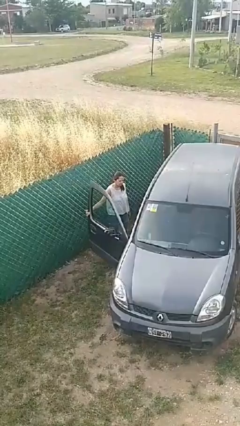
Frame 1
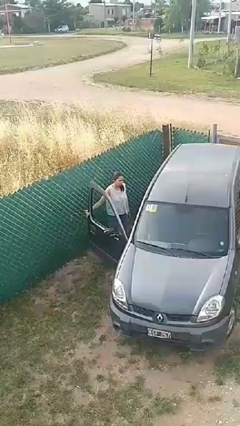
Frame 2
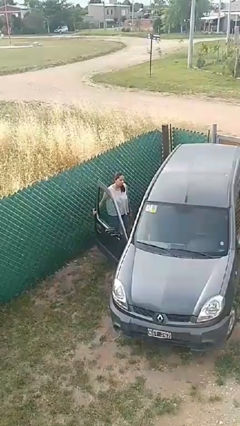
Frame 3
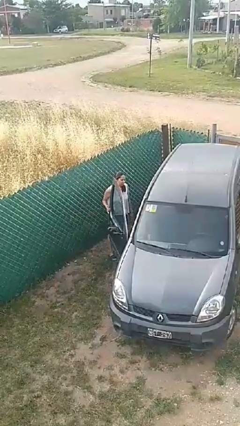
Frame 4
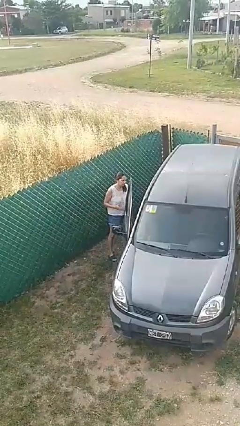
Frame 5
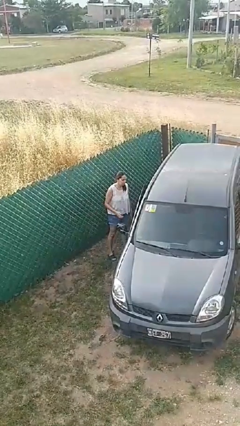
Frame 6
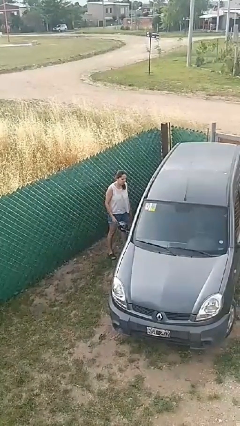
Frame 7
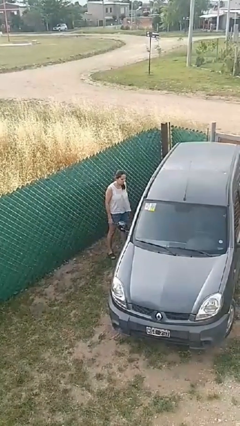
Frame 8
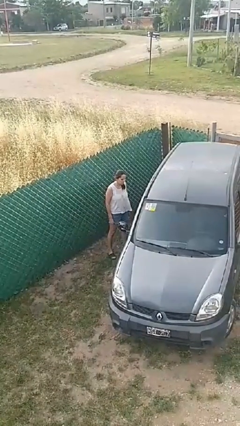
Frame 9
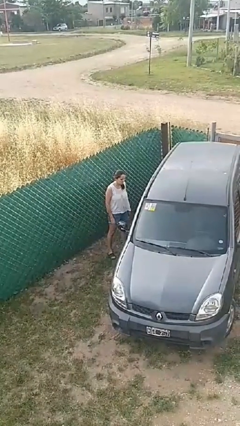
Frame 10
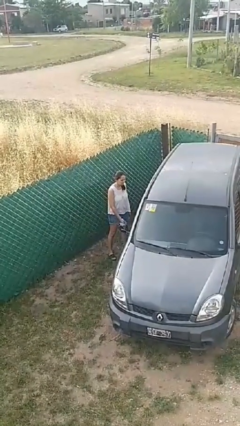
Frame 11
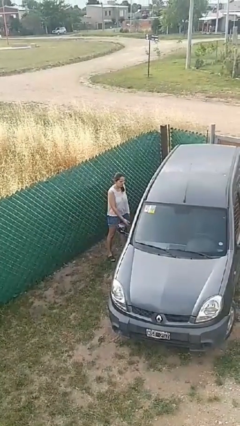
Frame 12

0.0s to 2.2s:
person closes car door

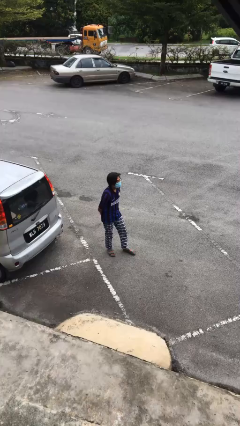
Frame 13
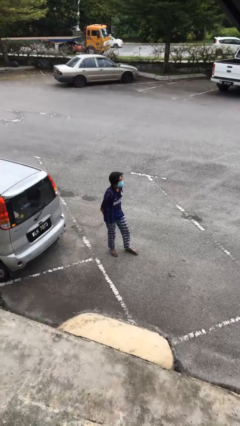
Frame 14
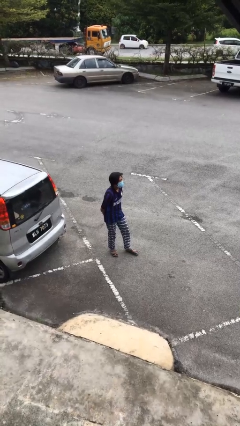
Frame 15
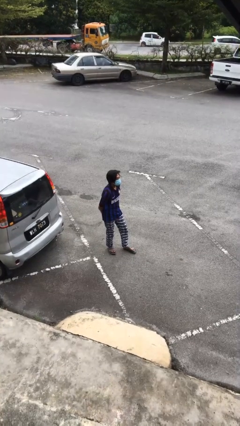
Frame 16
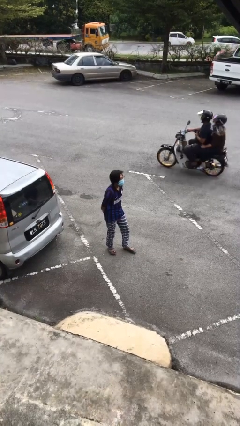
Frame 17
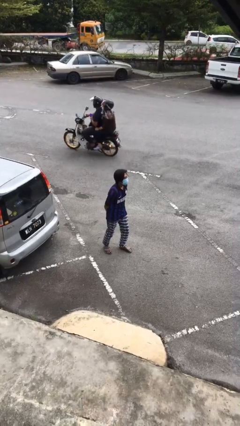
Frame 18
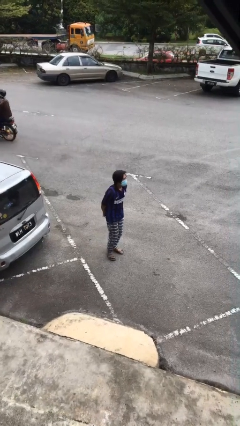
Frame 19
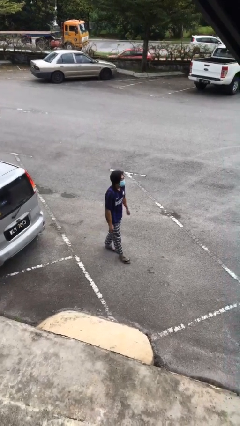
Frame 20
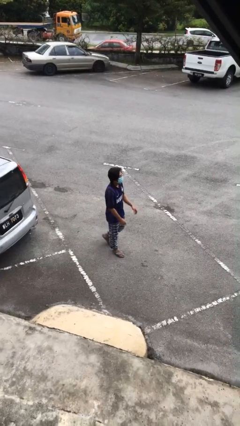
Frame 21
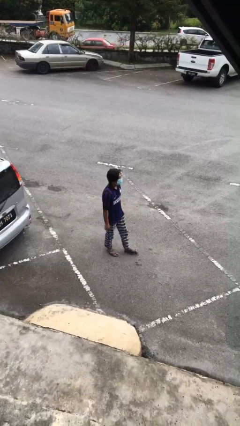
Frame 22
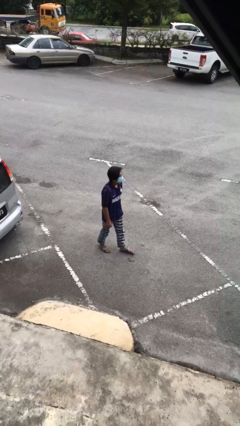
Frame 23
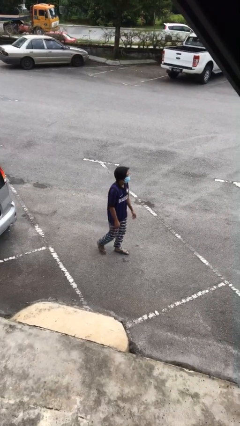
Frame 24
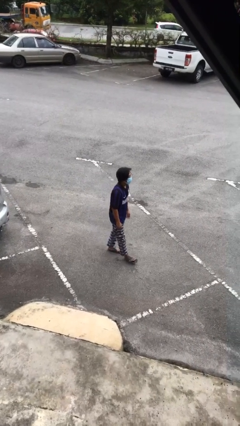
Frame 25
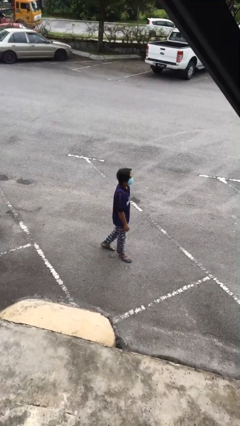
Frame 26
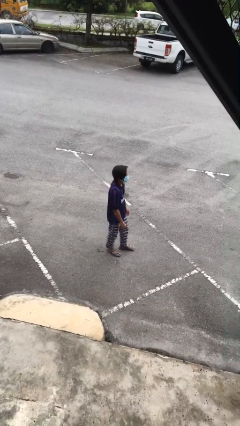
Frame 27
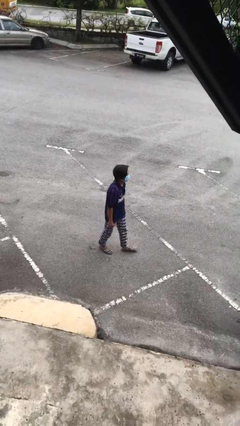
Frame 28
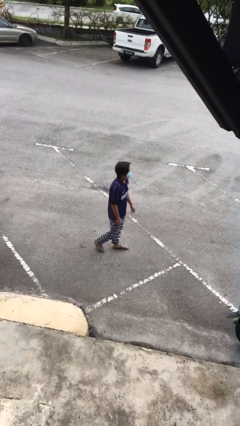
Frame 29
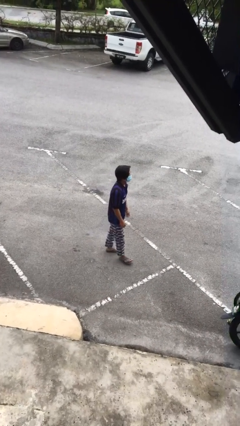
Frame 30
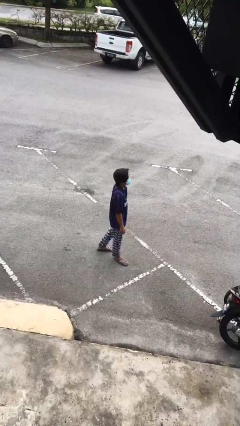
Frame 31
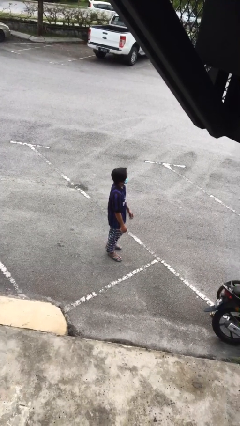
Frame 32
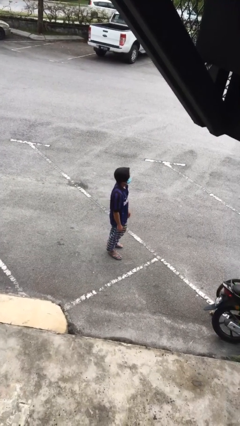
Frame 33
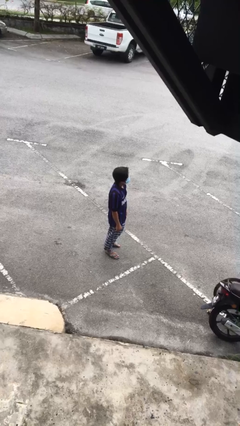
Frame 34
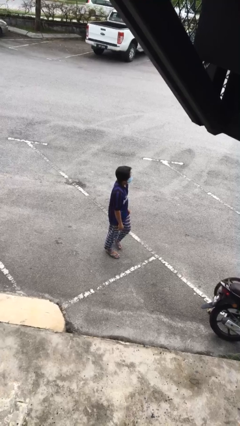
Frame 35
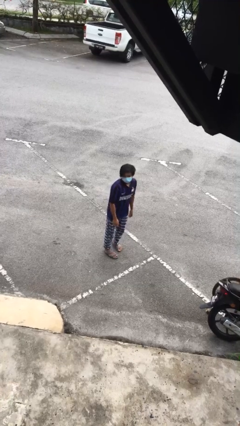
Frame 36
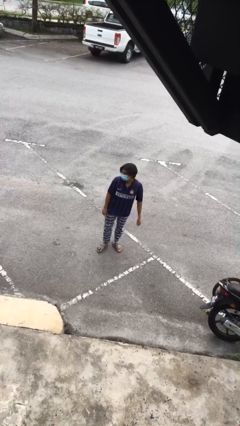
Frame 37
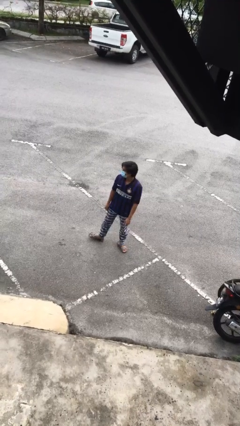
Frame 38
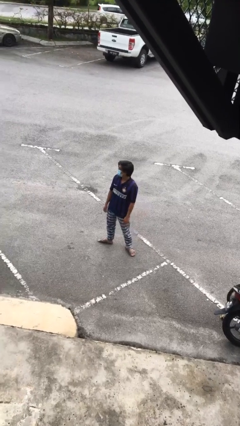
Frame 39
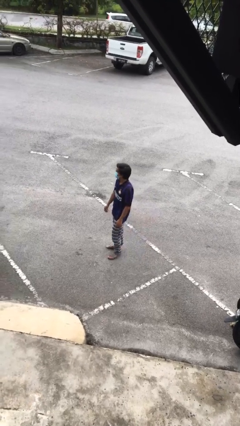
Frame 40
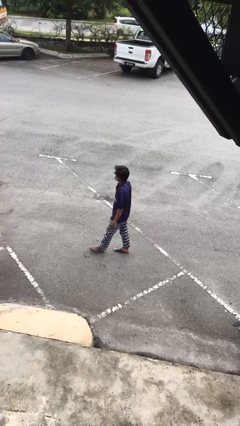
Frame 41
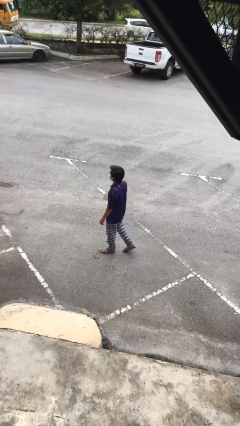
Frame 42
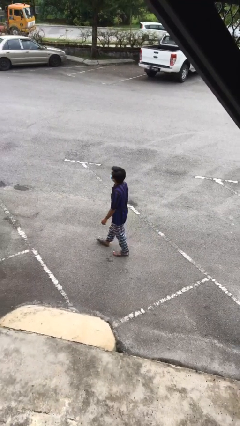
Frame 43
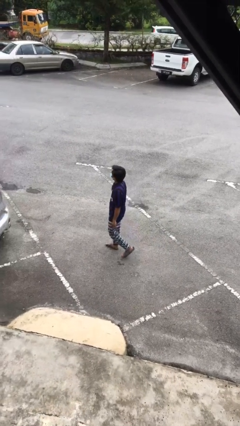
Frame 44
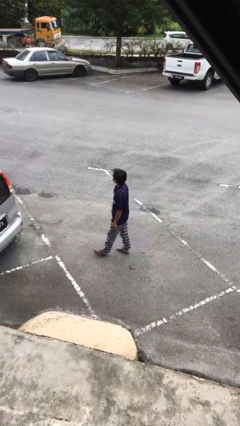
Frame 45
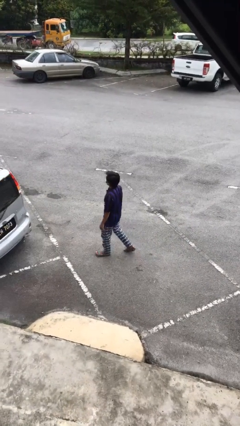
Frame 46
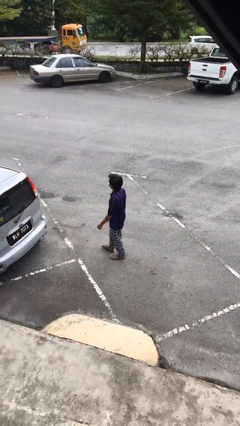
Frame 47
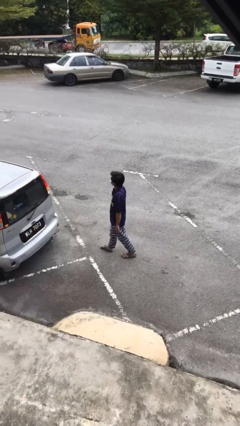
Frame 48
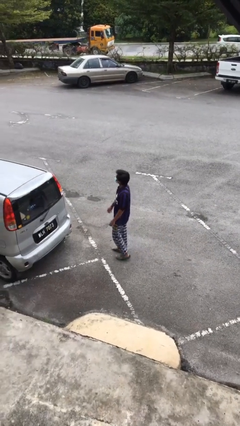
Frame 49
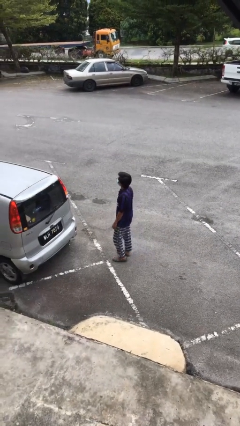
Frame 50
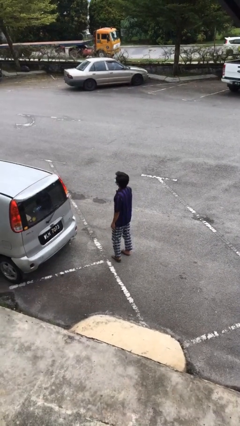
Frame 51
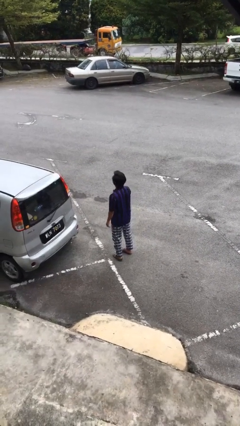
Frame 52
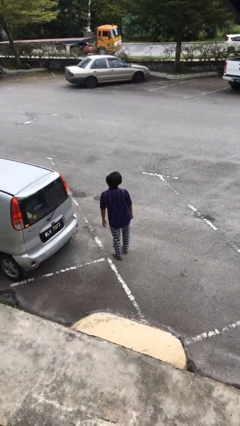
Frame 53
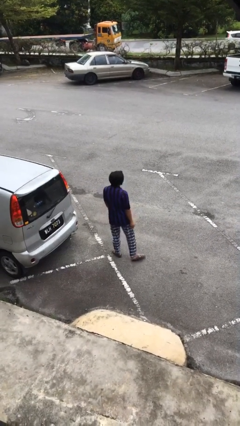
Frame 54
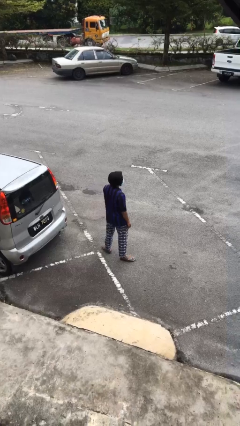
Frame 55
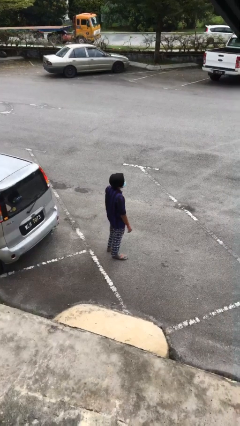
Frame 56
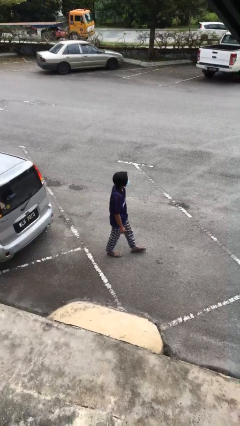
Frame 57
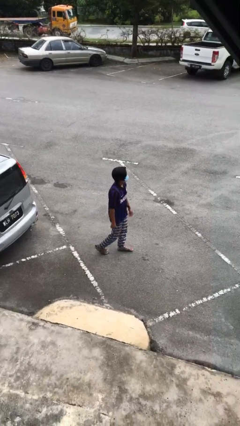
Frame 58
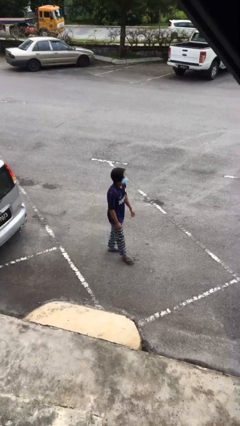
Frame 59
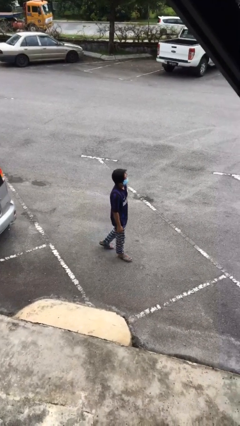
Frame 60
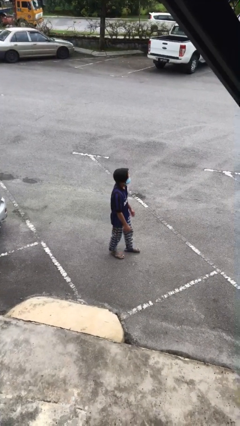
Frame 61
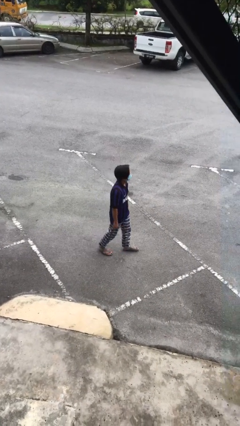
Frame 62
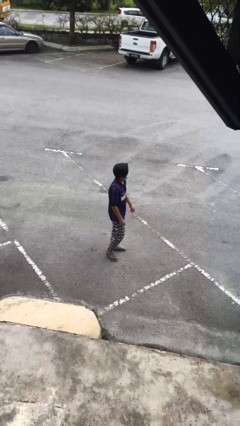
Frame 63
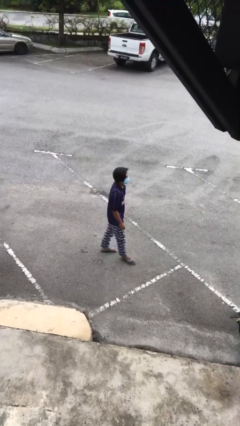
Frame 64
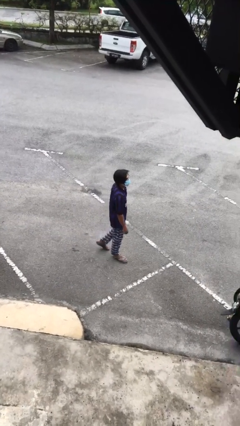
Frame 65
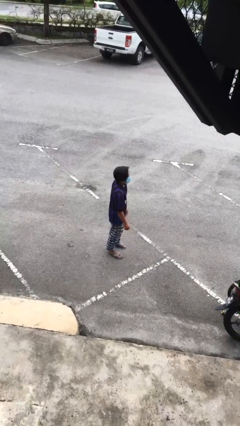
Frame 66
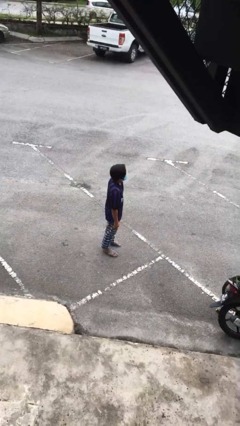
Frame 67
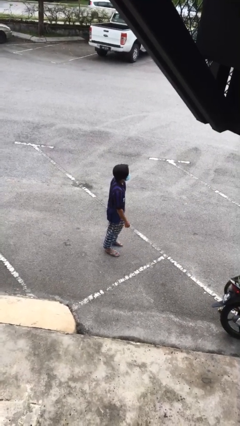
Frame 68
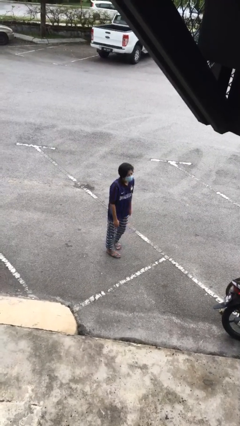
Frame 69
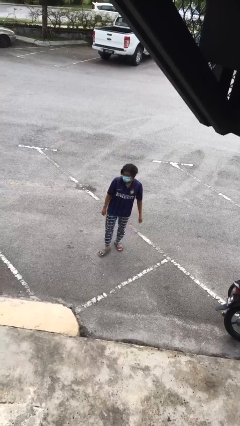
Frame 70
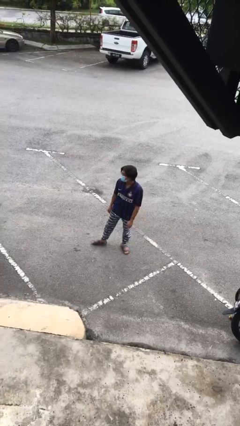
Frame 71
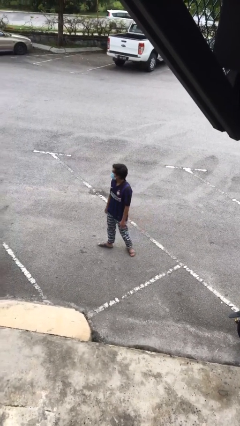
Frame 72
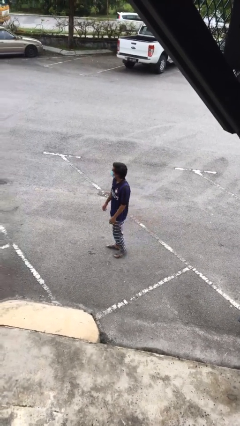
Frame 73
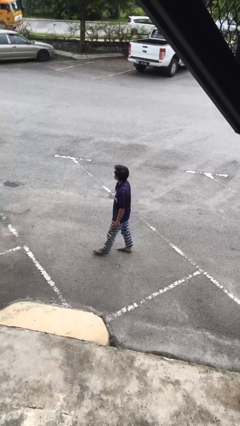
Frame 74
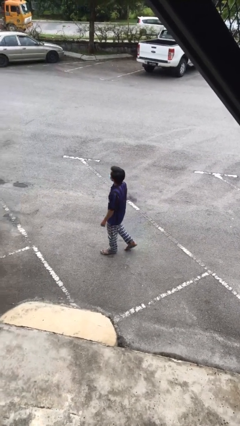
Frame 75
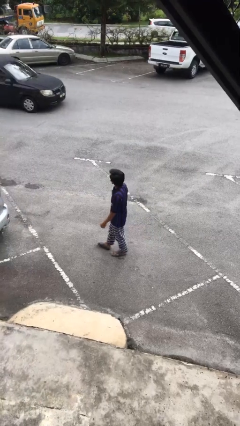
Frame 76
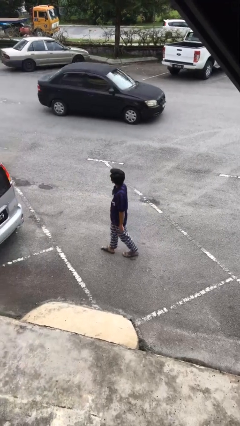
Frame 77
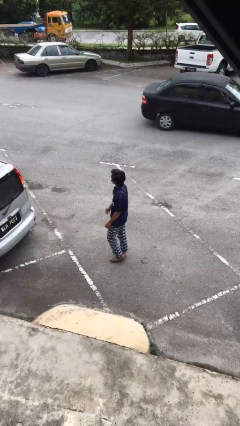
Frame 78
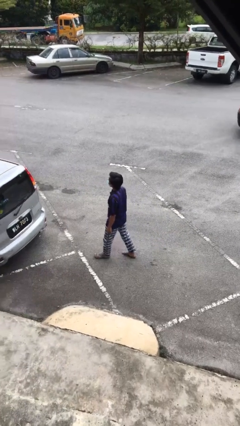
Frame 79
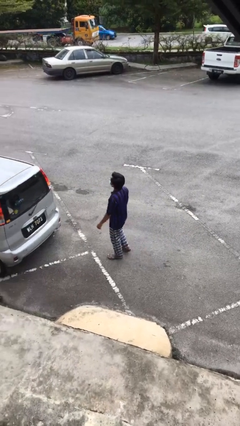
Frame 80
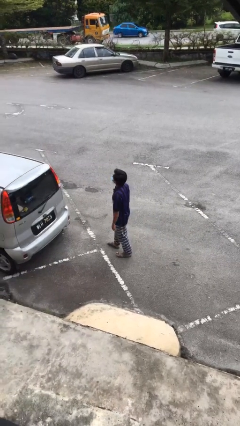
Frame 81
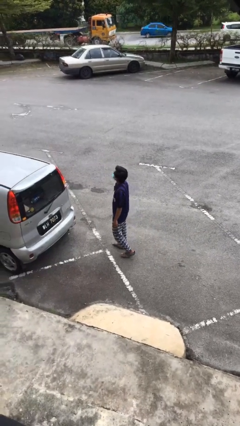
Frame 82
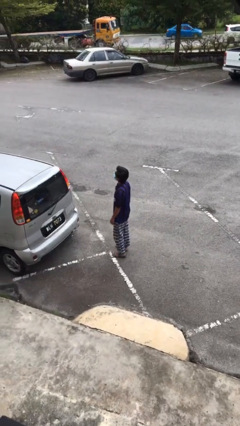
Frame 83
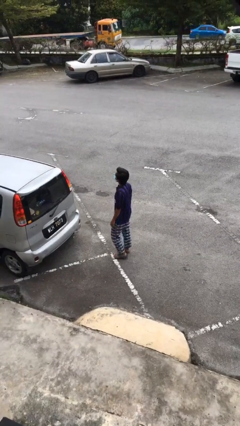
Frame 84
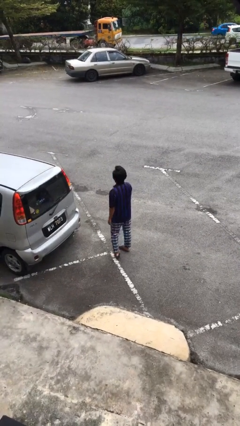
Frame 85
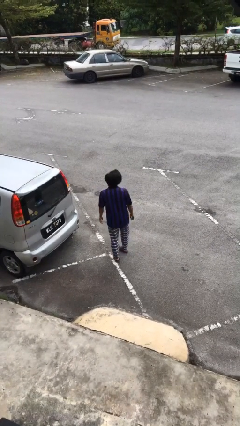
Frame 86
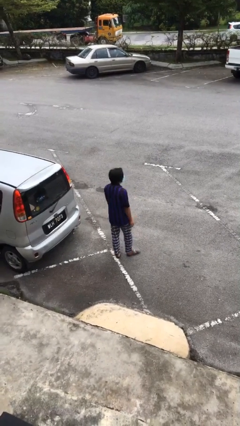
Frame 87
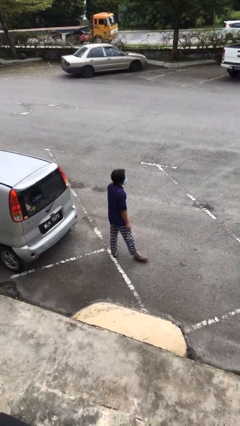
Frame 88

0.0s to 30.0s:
person walks

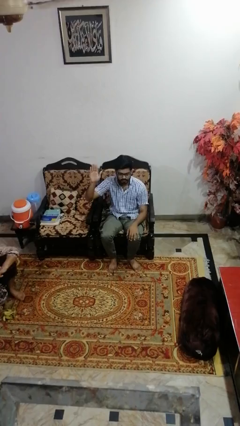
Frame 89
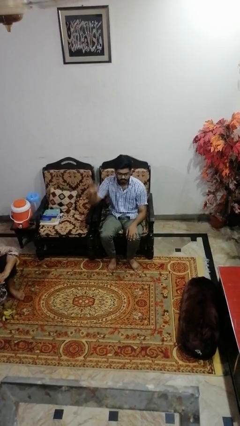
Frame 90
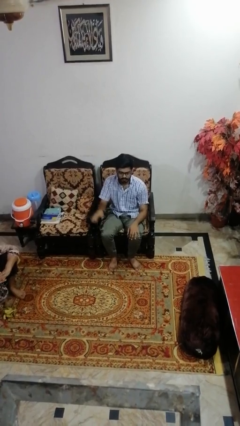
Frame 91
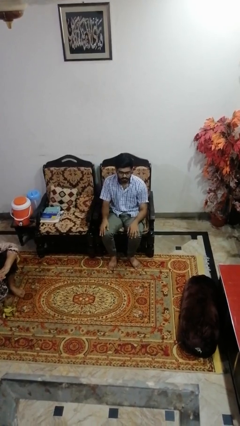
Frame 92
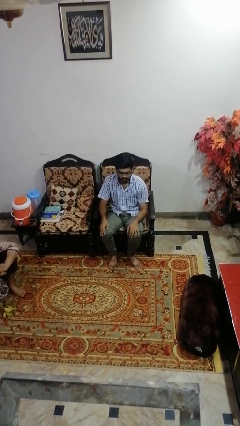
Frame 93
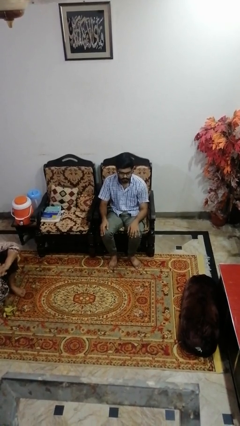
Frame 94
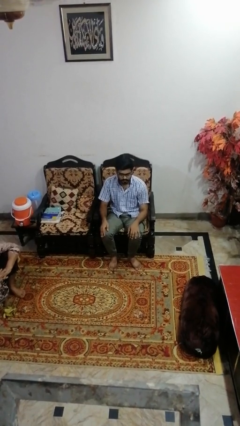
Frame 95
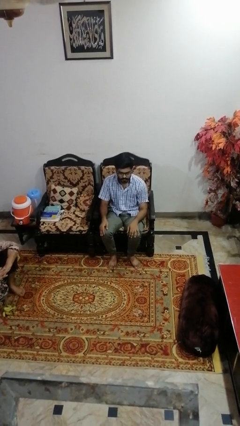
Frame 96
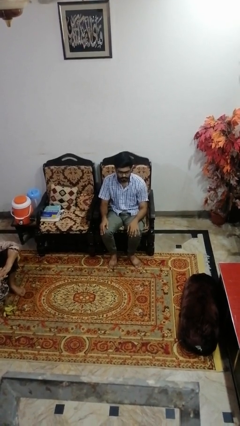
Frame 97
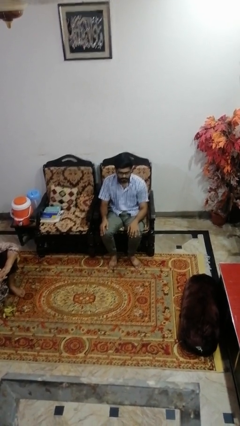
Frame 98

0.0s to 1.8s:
person gestures lower hand
